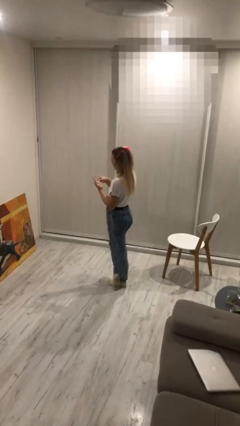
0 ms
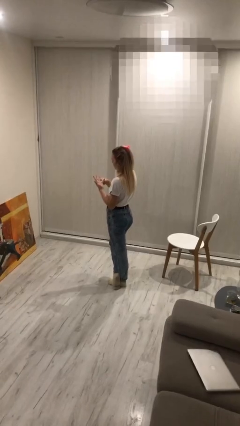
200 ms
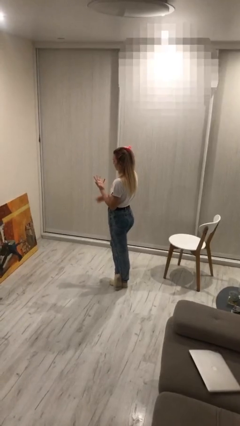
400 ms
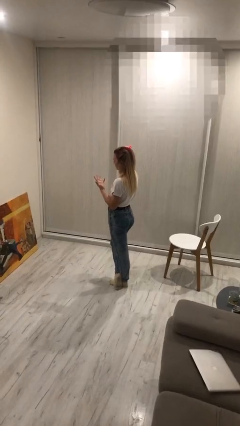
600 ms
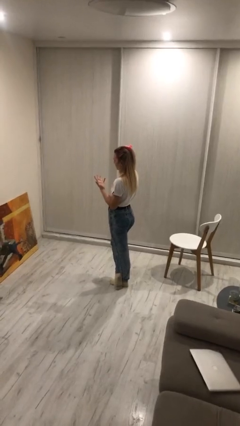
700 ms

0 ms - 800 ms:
person puts on ring

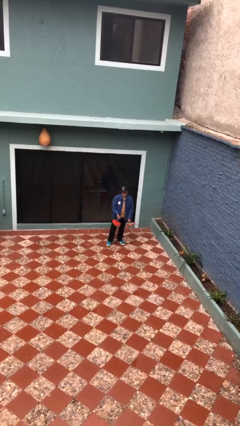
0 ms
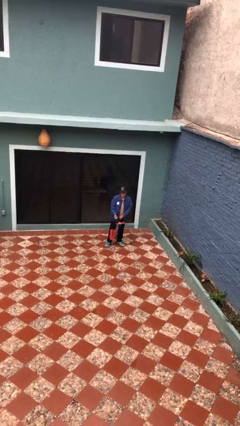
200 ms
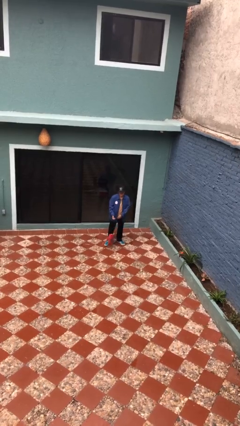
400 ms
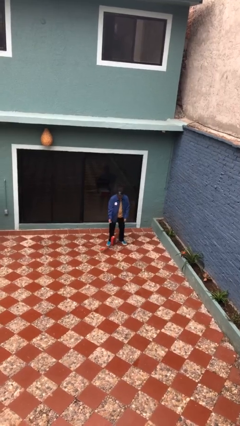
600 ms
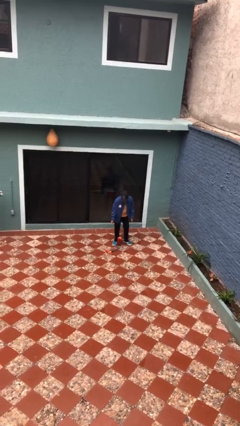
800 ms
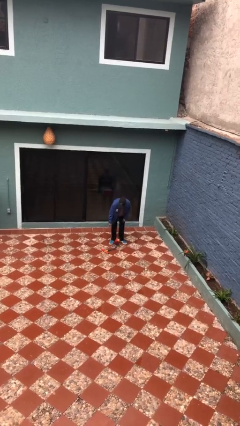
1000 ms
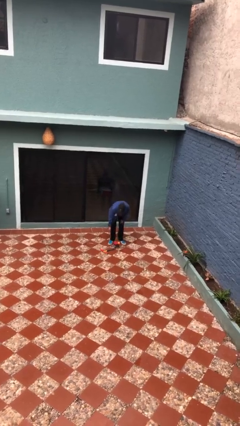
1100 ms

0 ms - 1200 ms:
person drops object

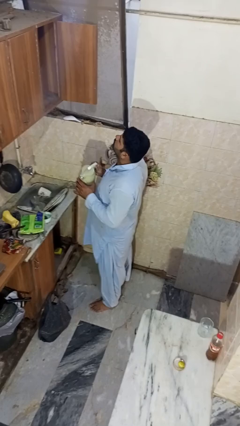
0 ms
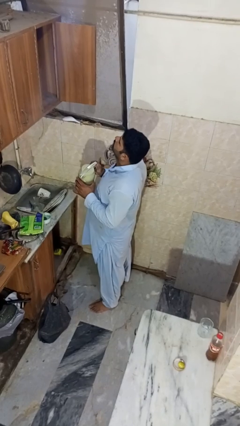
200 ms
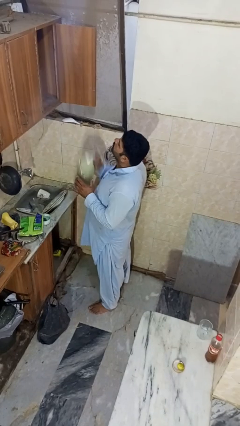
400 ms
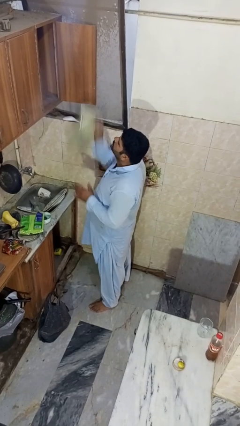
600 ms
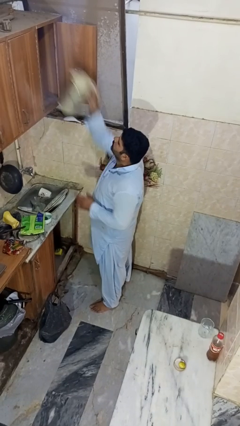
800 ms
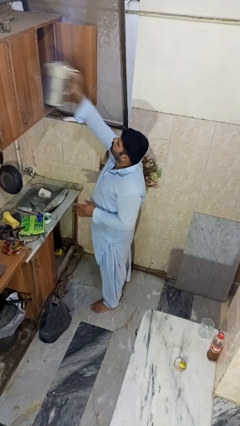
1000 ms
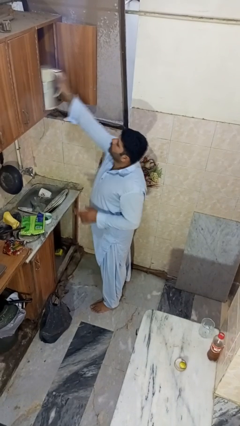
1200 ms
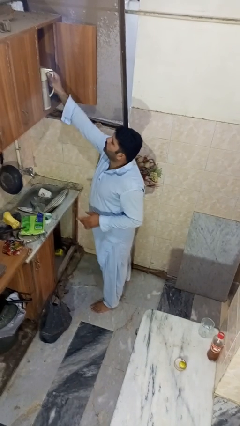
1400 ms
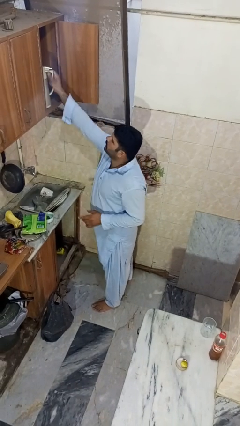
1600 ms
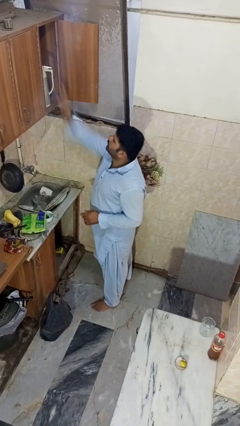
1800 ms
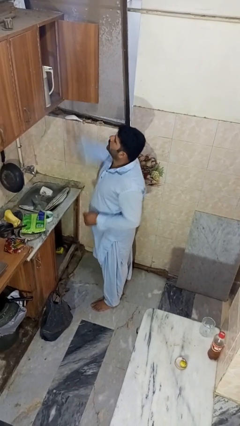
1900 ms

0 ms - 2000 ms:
person puts object in cabinet

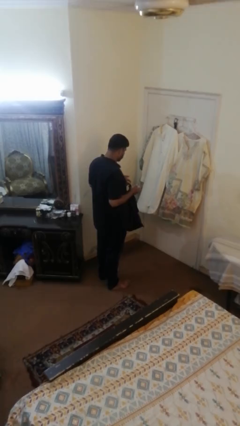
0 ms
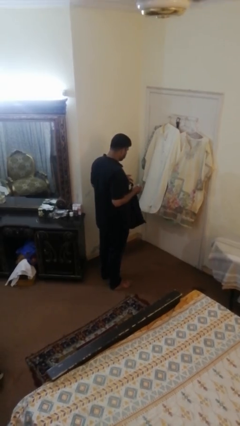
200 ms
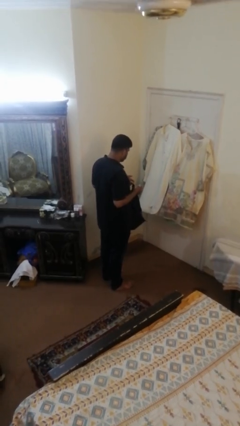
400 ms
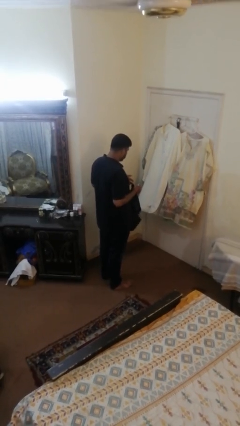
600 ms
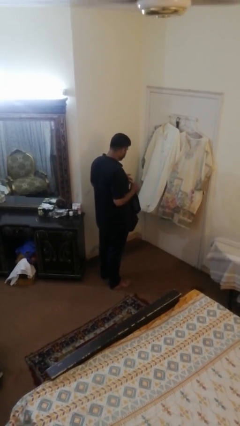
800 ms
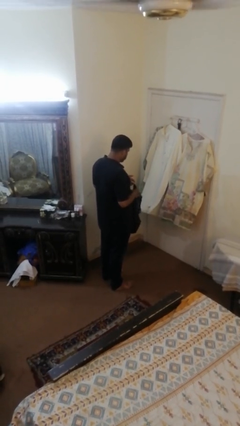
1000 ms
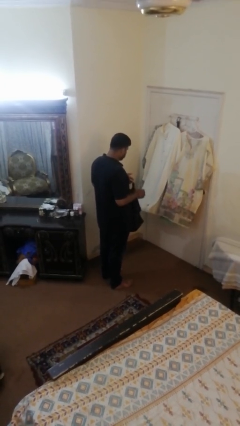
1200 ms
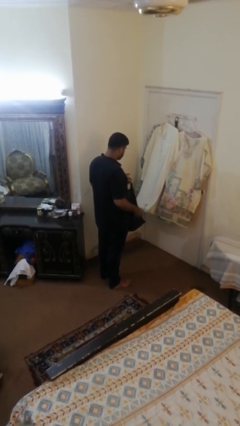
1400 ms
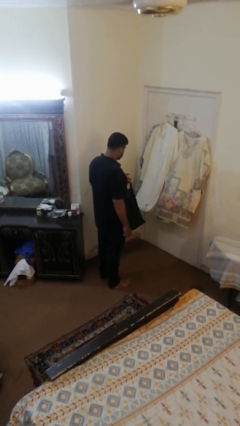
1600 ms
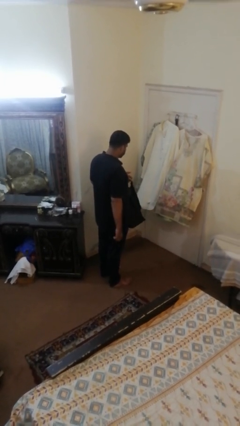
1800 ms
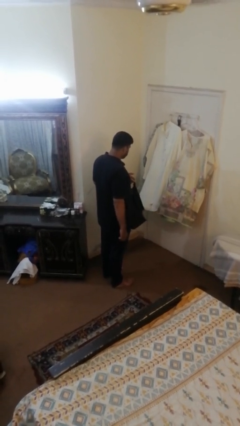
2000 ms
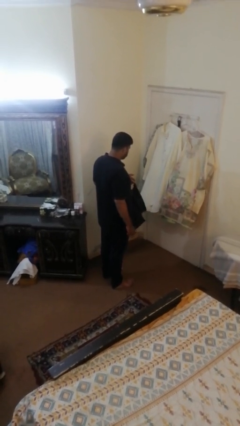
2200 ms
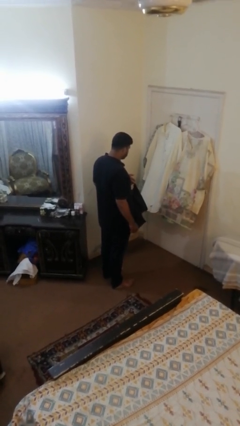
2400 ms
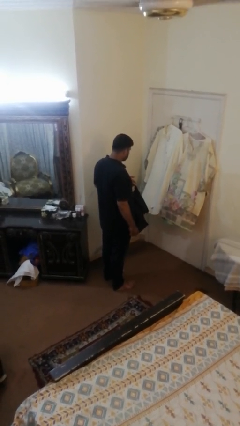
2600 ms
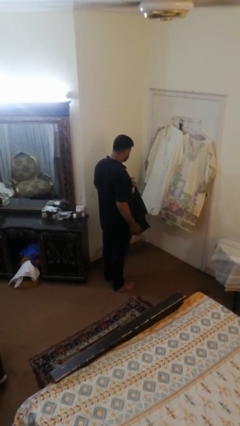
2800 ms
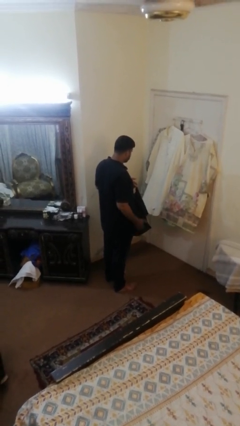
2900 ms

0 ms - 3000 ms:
person puts object into bag

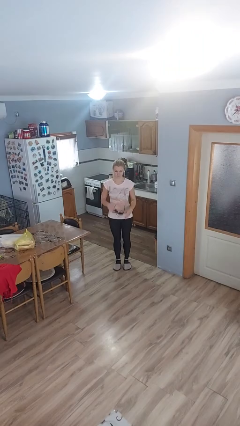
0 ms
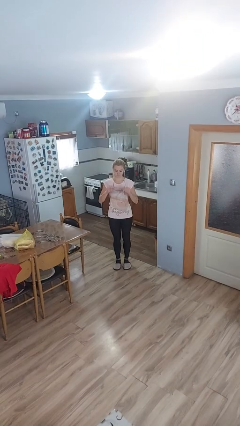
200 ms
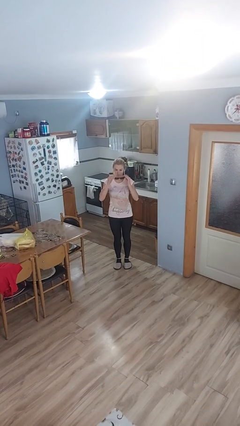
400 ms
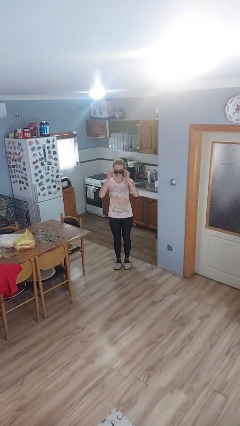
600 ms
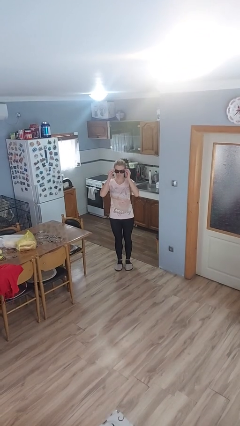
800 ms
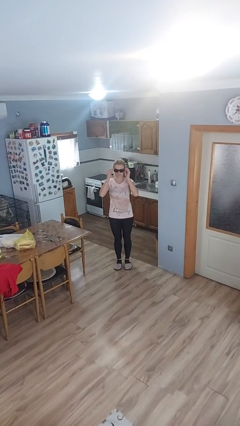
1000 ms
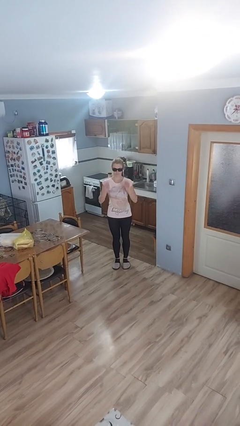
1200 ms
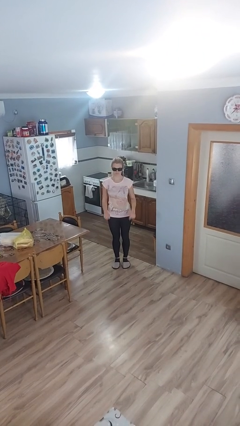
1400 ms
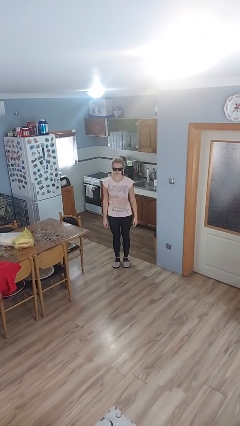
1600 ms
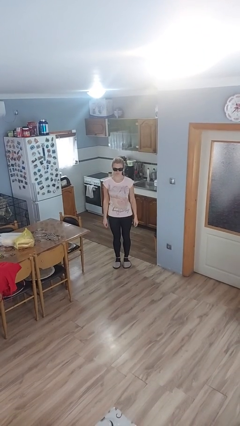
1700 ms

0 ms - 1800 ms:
person puts on sunglasses

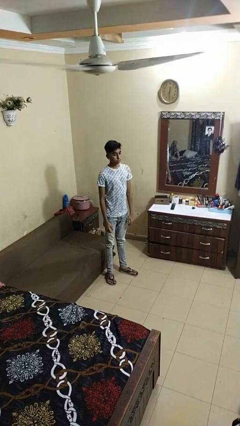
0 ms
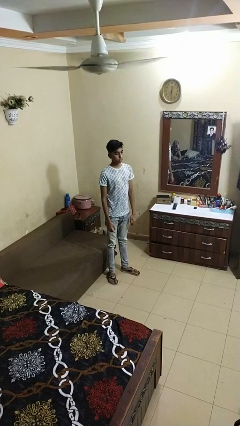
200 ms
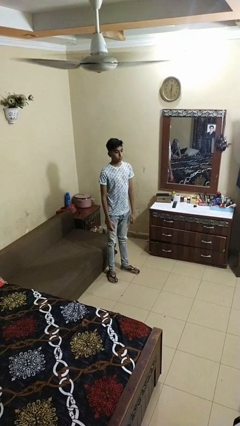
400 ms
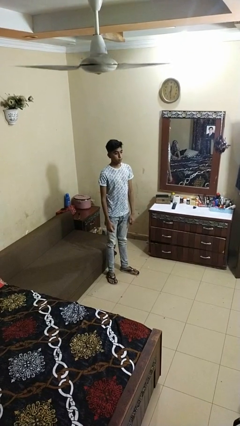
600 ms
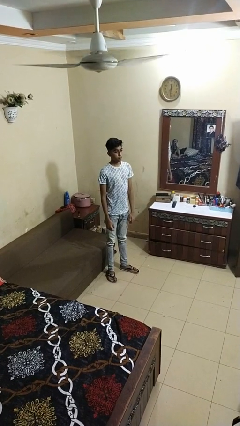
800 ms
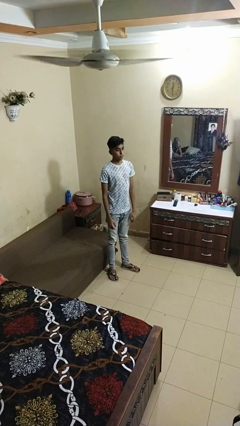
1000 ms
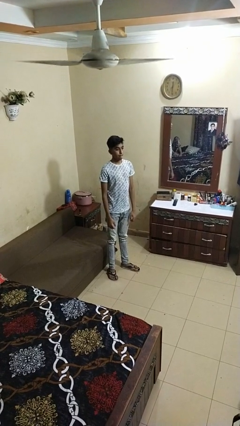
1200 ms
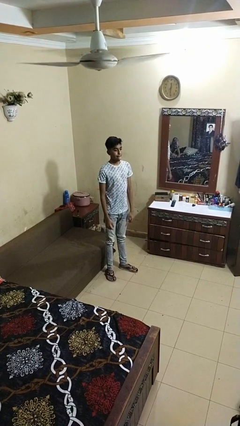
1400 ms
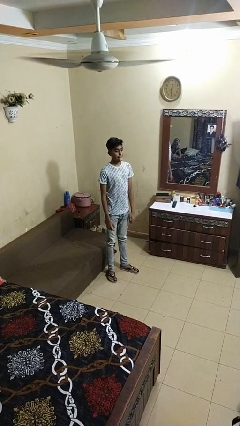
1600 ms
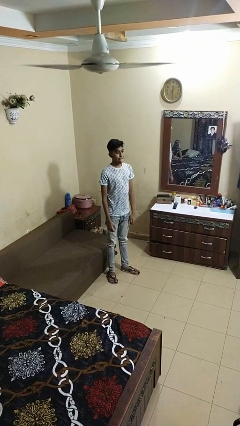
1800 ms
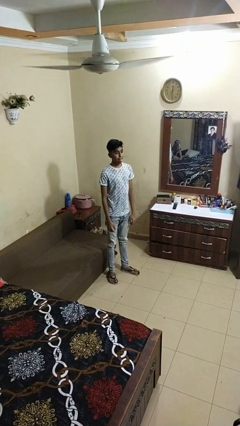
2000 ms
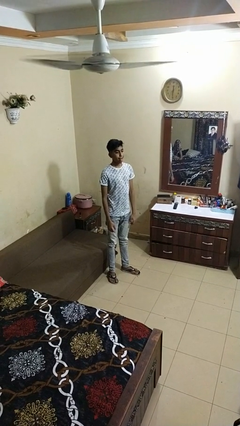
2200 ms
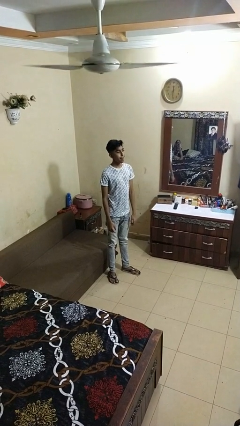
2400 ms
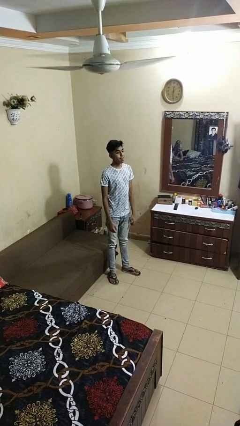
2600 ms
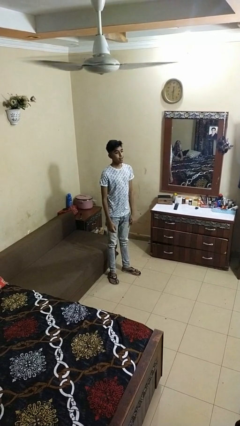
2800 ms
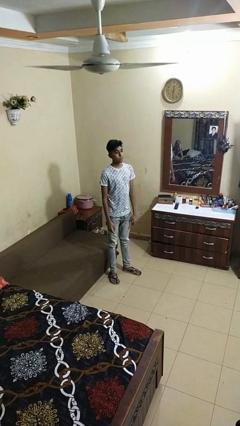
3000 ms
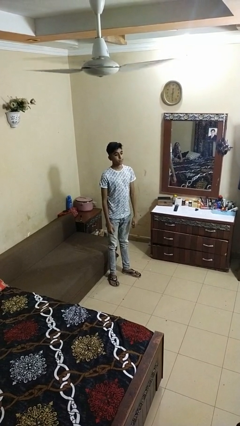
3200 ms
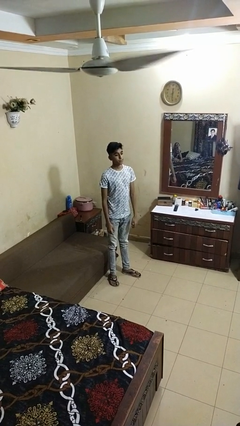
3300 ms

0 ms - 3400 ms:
person sticks out tongue

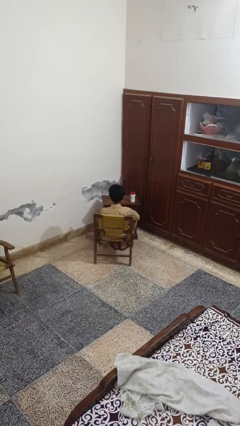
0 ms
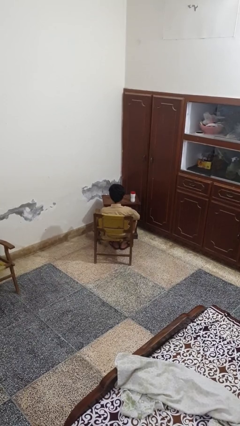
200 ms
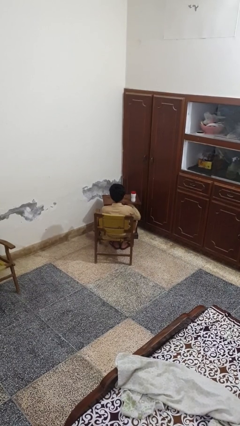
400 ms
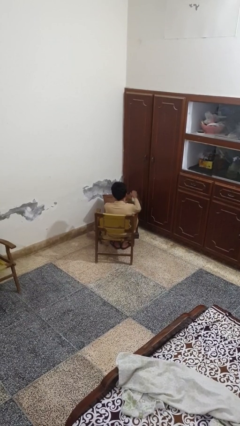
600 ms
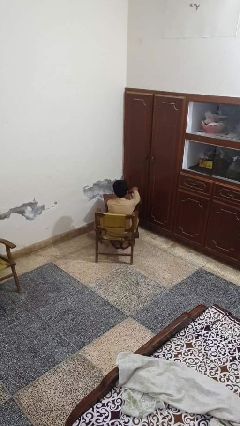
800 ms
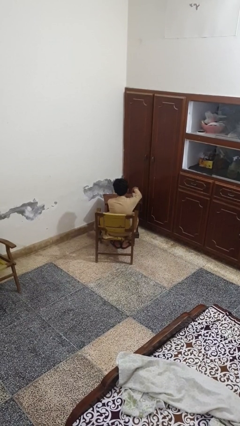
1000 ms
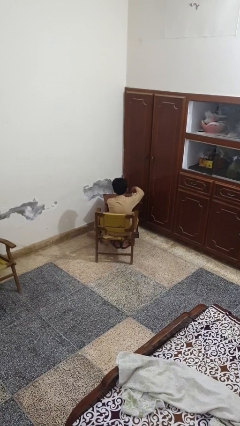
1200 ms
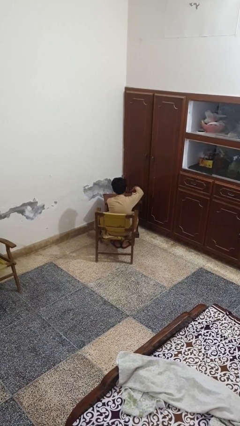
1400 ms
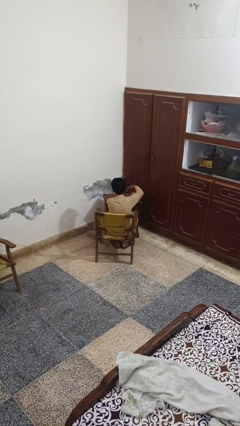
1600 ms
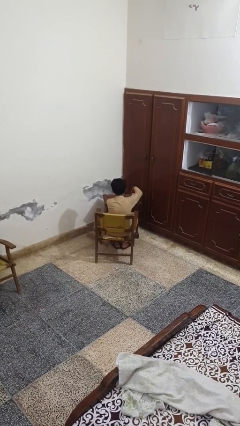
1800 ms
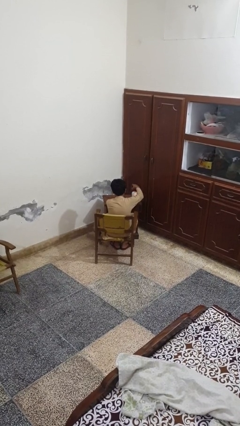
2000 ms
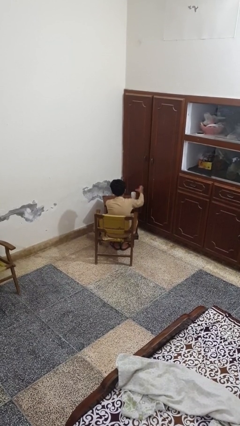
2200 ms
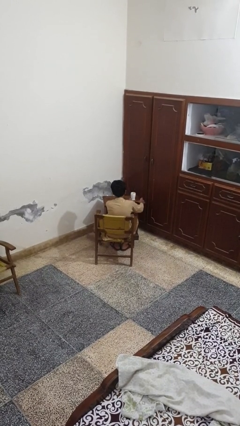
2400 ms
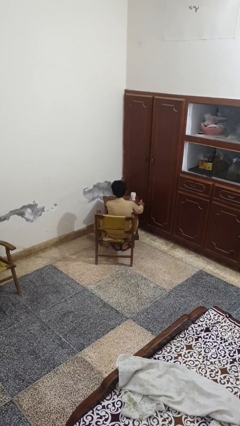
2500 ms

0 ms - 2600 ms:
person opens jar

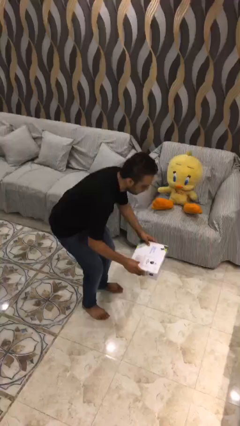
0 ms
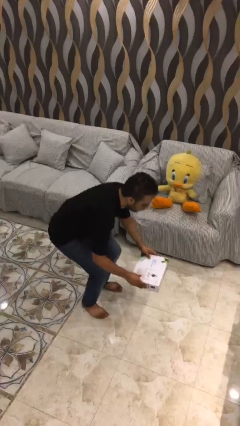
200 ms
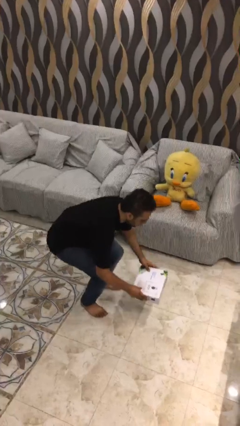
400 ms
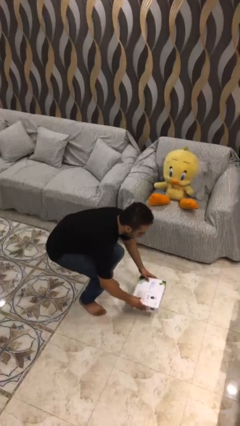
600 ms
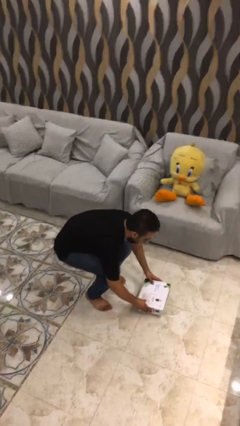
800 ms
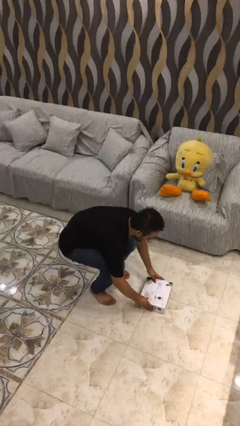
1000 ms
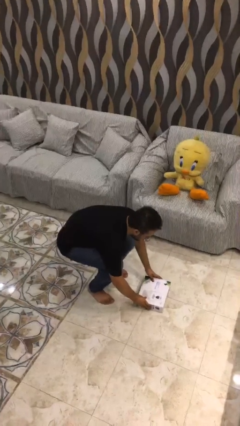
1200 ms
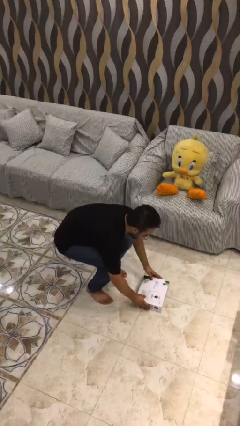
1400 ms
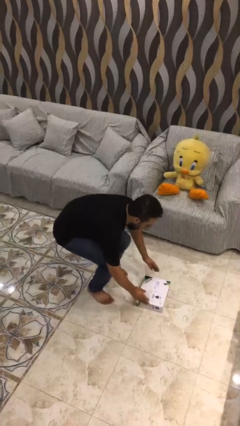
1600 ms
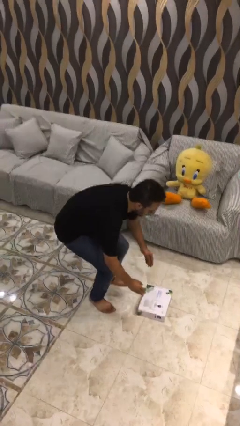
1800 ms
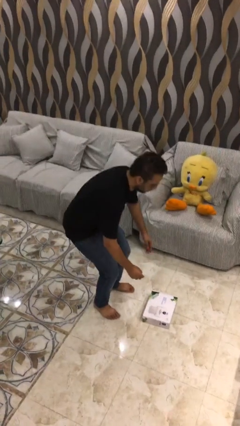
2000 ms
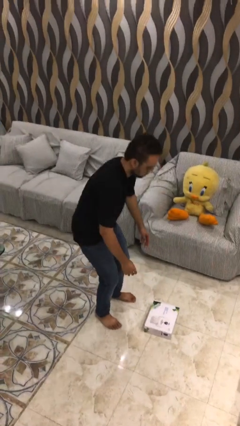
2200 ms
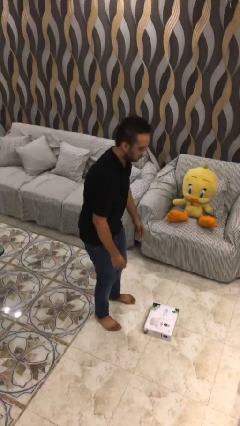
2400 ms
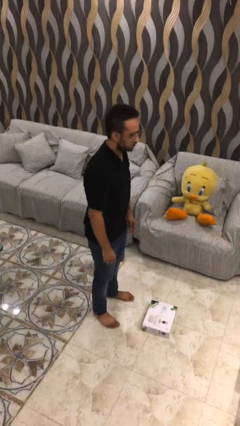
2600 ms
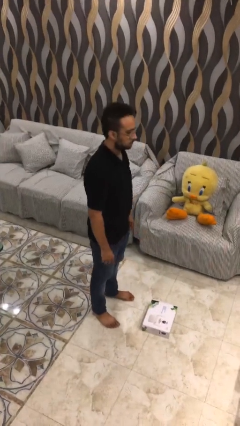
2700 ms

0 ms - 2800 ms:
person puts down object on floor
